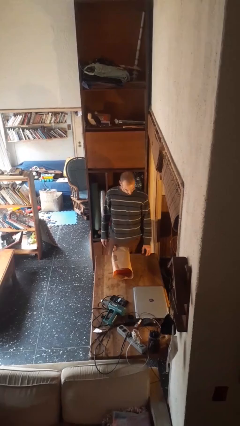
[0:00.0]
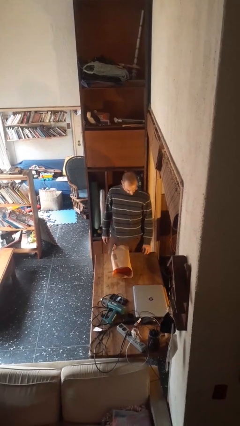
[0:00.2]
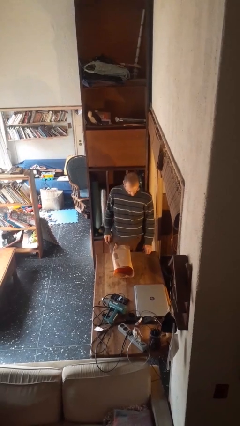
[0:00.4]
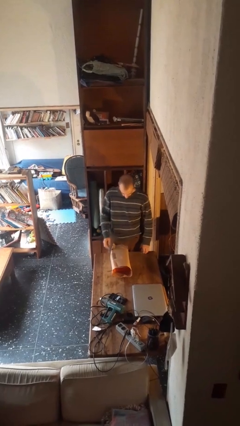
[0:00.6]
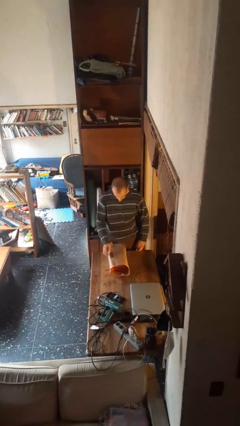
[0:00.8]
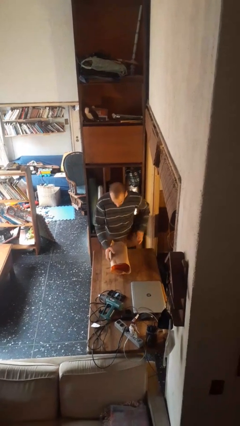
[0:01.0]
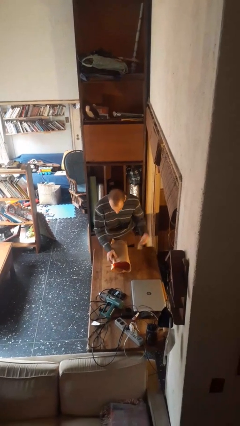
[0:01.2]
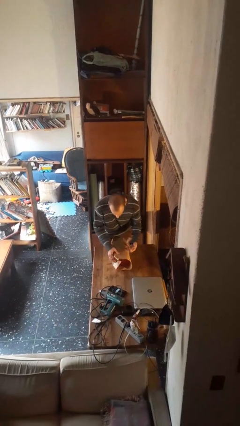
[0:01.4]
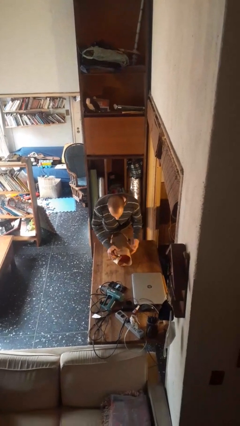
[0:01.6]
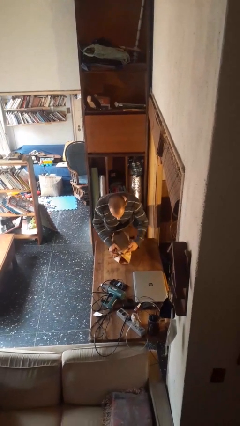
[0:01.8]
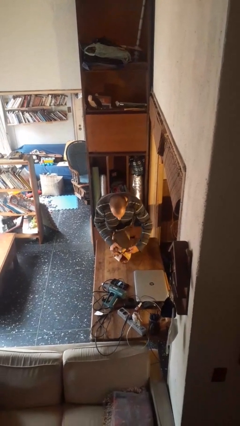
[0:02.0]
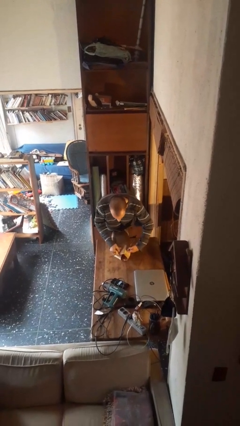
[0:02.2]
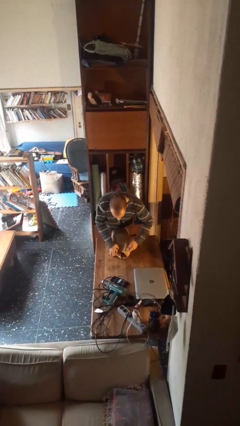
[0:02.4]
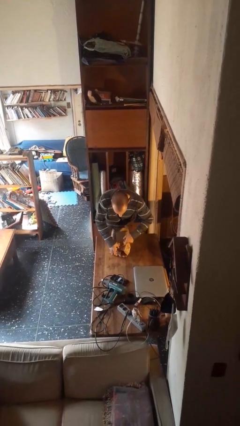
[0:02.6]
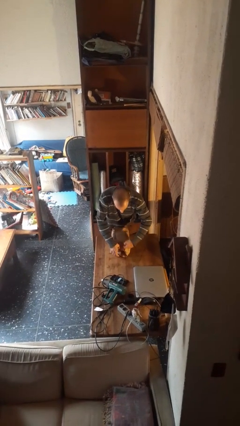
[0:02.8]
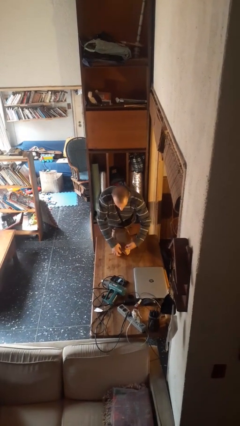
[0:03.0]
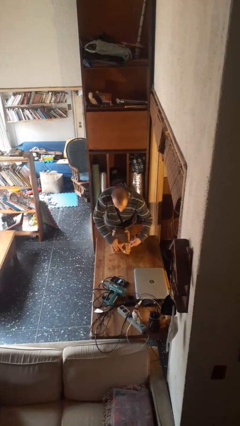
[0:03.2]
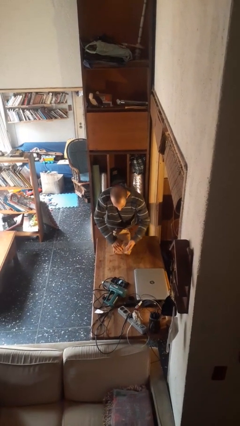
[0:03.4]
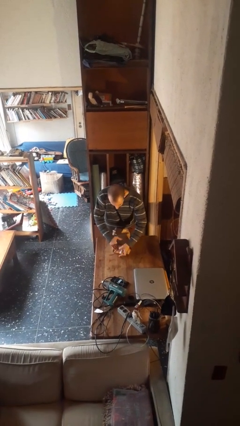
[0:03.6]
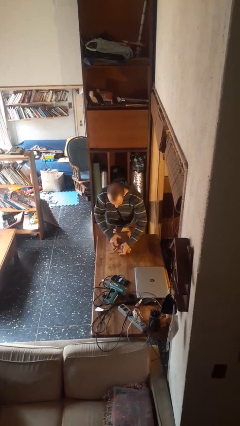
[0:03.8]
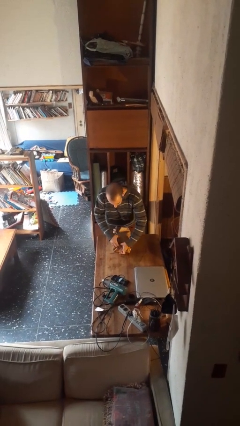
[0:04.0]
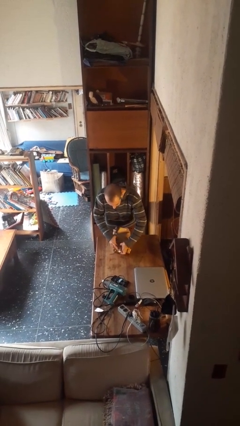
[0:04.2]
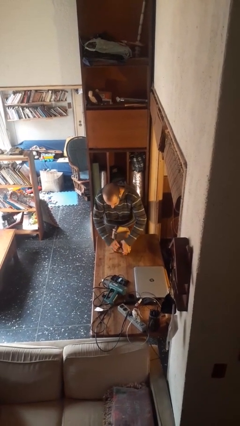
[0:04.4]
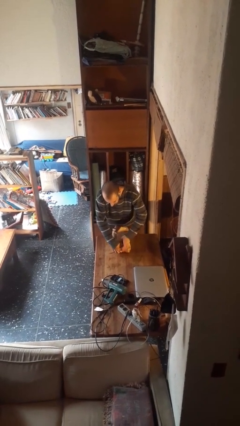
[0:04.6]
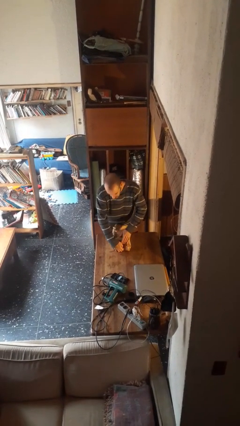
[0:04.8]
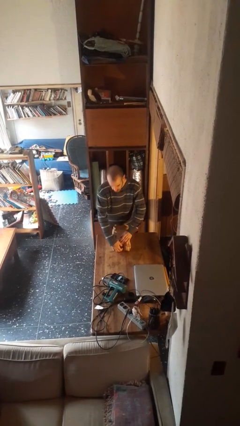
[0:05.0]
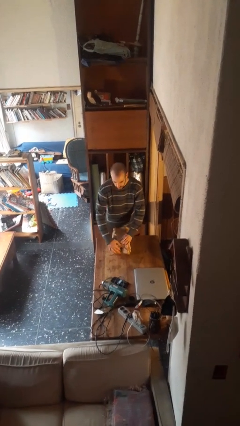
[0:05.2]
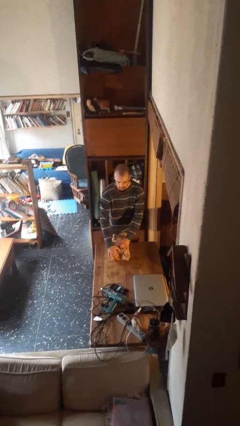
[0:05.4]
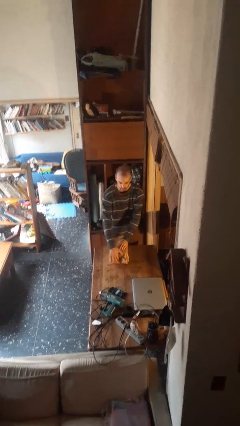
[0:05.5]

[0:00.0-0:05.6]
person wraps box

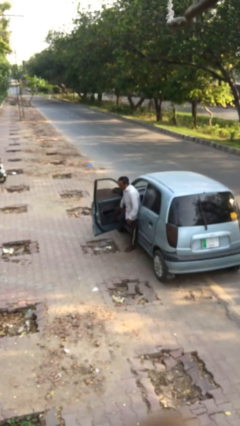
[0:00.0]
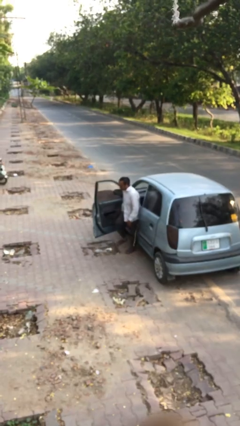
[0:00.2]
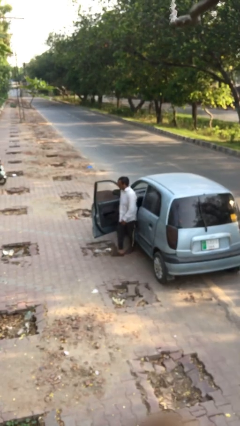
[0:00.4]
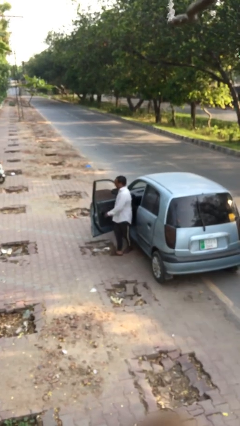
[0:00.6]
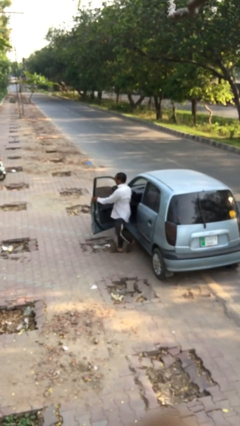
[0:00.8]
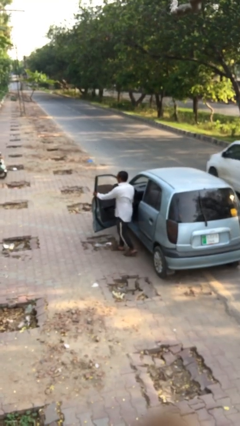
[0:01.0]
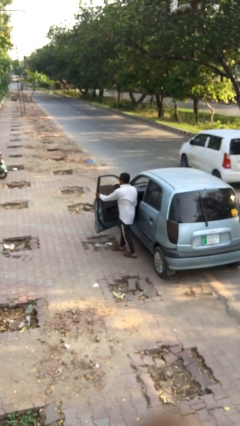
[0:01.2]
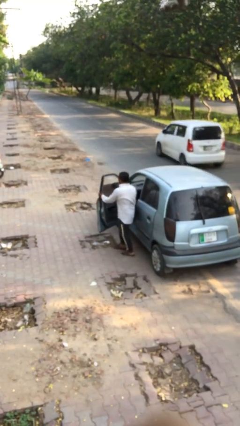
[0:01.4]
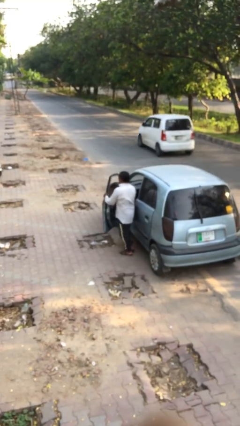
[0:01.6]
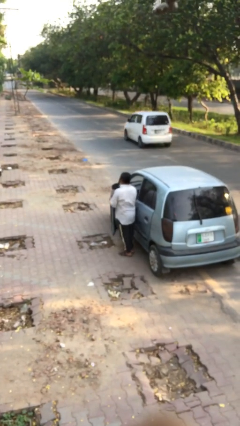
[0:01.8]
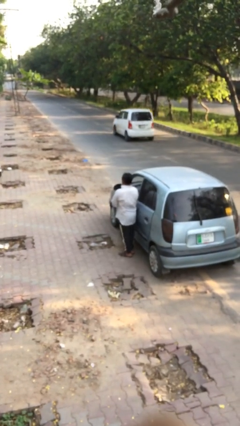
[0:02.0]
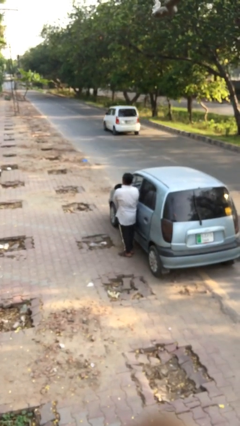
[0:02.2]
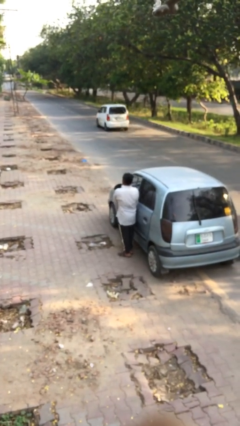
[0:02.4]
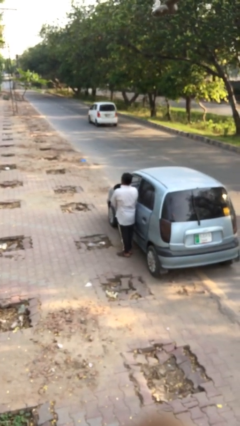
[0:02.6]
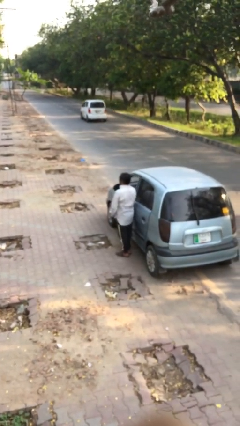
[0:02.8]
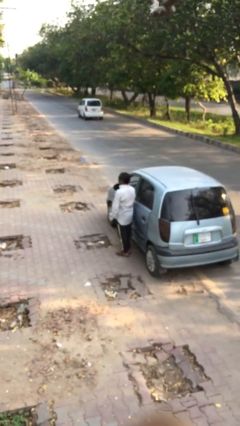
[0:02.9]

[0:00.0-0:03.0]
person closes car door

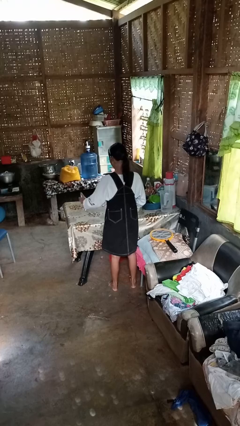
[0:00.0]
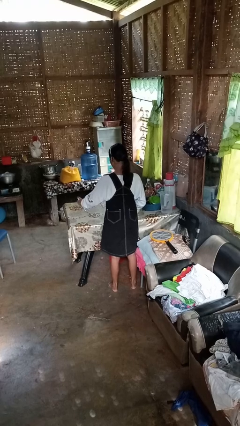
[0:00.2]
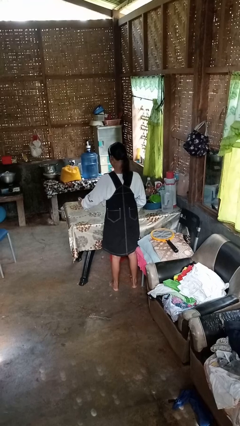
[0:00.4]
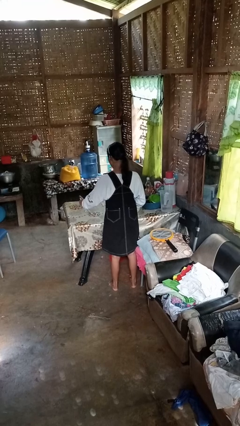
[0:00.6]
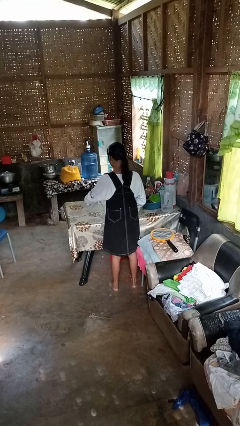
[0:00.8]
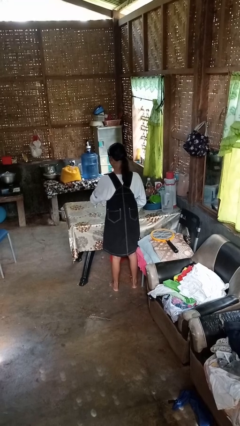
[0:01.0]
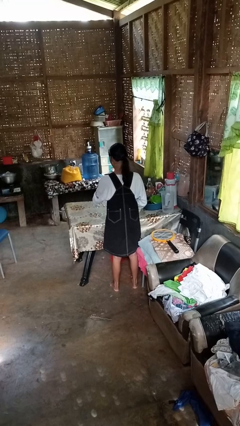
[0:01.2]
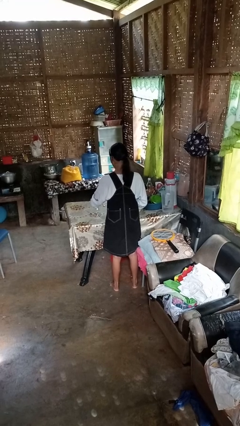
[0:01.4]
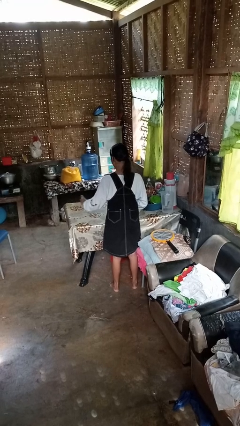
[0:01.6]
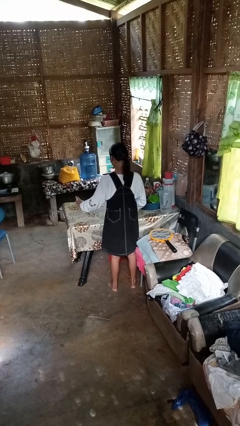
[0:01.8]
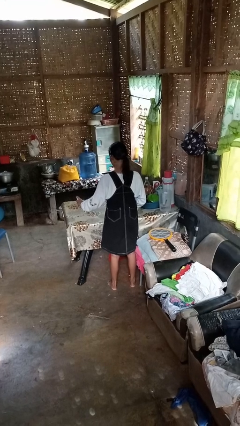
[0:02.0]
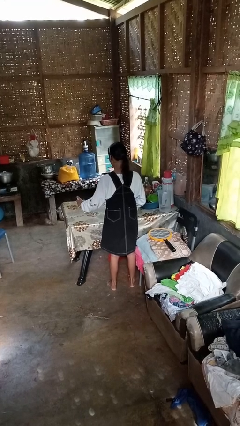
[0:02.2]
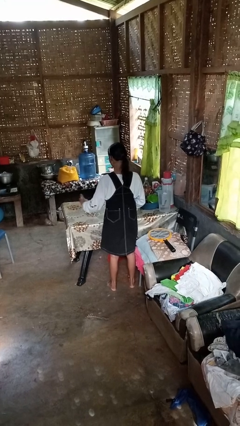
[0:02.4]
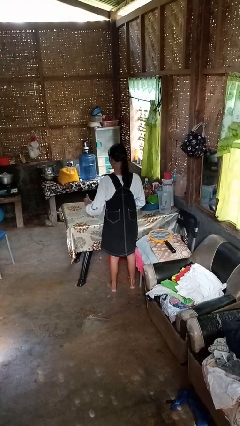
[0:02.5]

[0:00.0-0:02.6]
person sprays from bottle

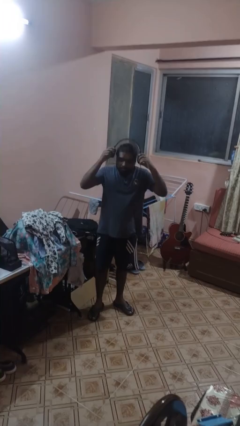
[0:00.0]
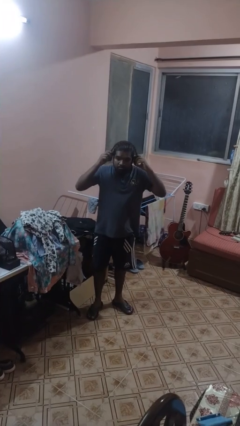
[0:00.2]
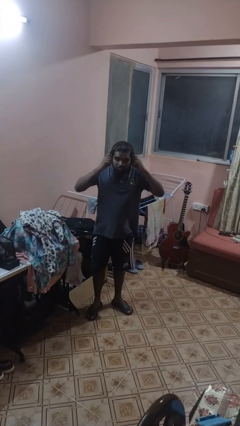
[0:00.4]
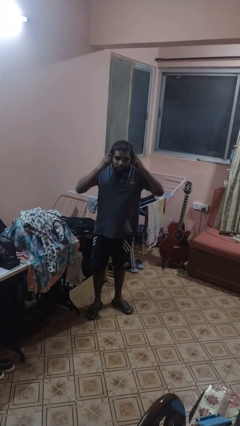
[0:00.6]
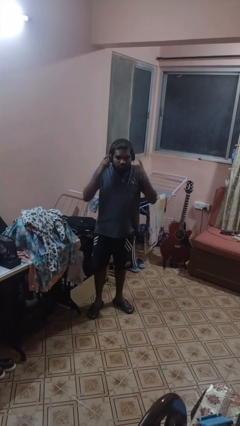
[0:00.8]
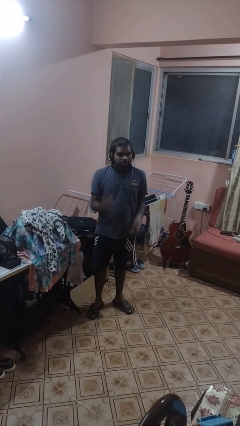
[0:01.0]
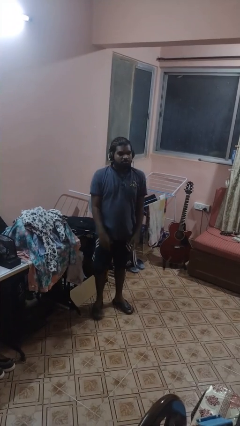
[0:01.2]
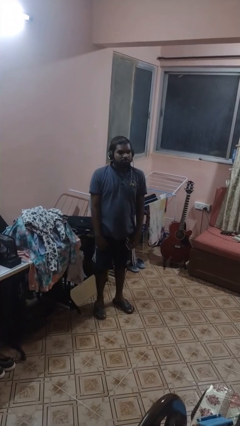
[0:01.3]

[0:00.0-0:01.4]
person puts on headphones

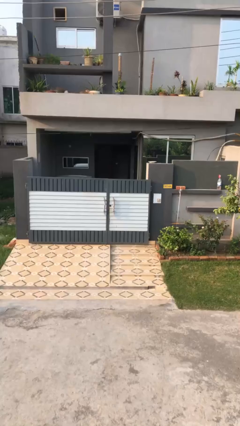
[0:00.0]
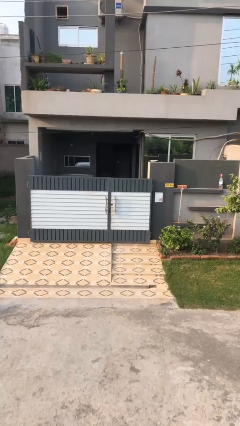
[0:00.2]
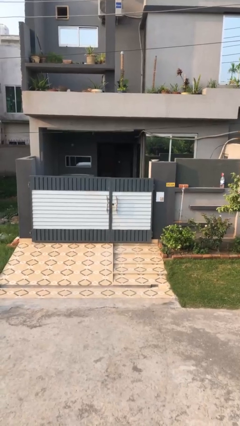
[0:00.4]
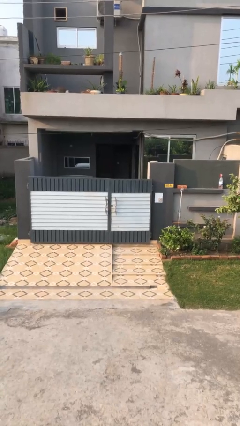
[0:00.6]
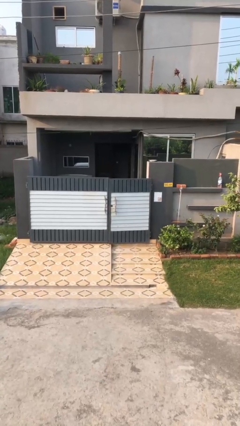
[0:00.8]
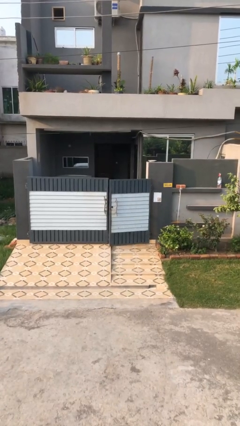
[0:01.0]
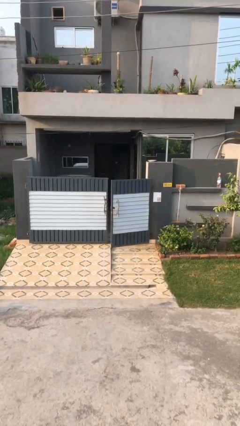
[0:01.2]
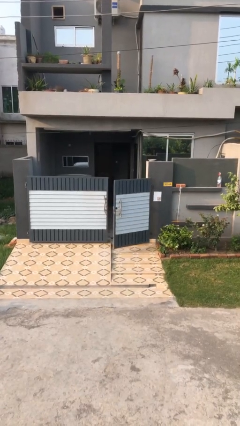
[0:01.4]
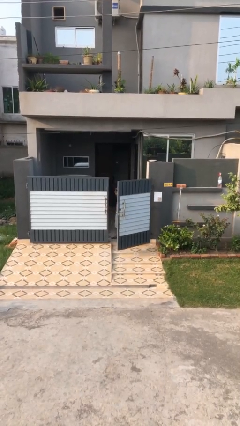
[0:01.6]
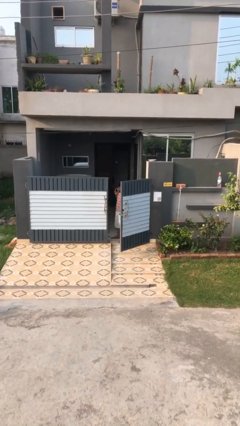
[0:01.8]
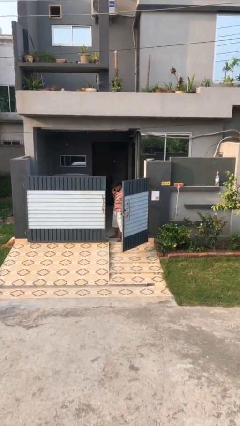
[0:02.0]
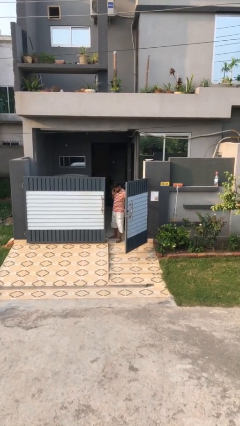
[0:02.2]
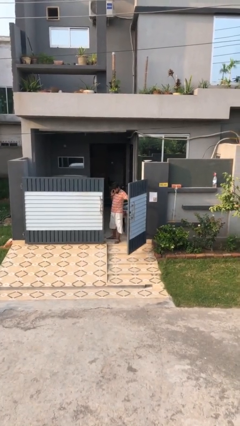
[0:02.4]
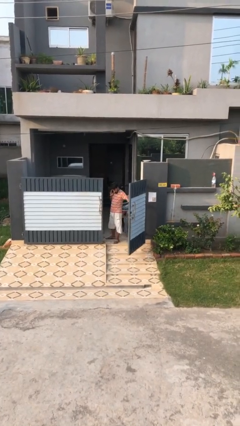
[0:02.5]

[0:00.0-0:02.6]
person opens facility door

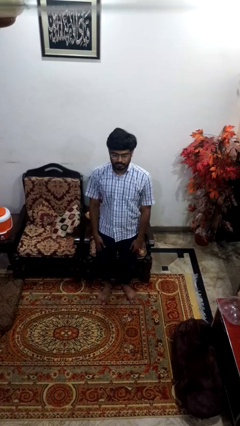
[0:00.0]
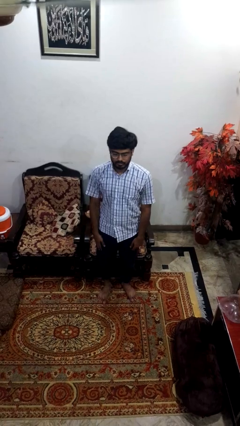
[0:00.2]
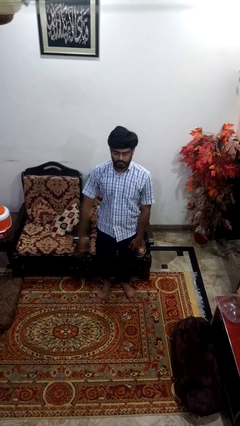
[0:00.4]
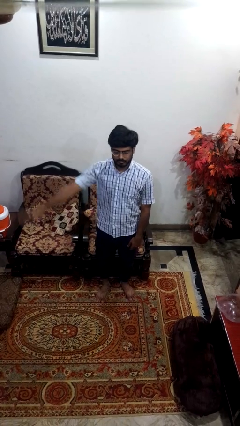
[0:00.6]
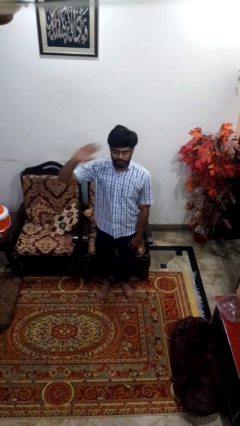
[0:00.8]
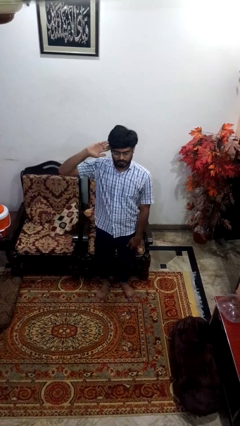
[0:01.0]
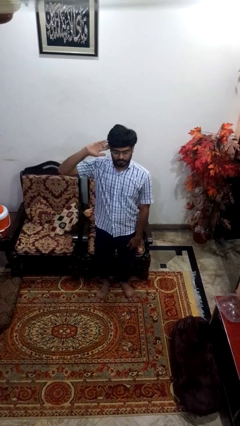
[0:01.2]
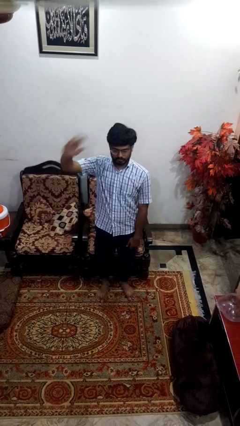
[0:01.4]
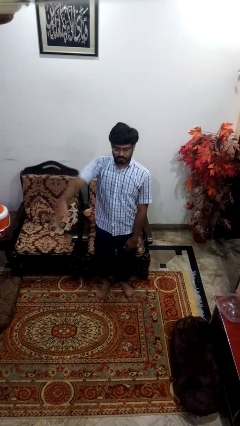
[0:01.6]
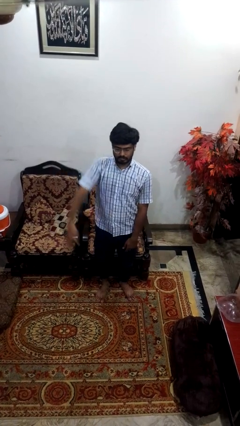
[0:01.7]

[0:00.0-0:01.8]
person salutes
